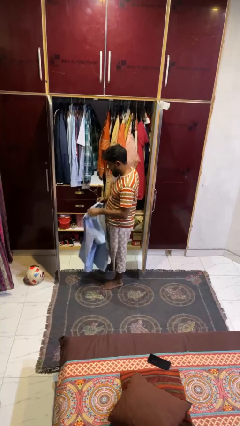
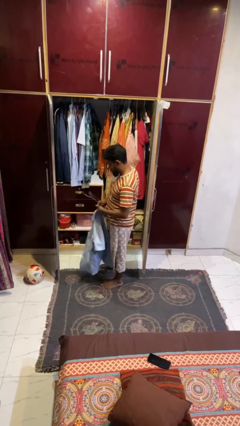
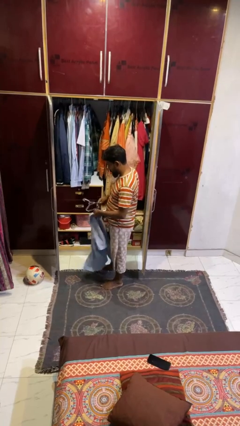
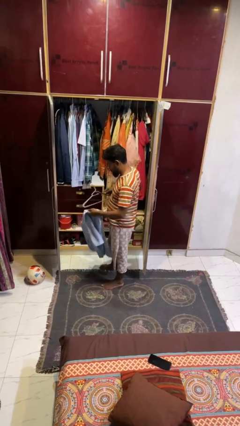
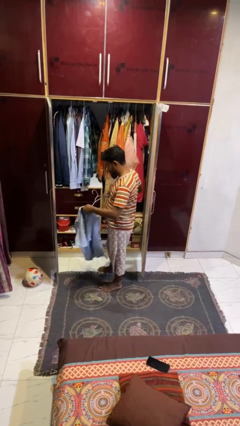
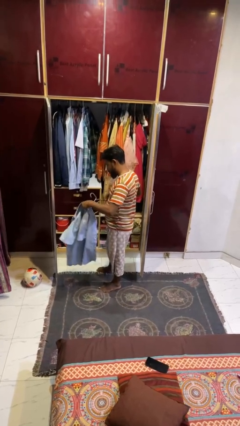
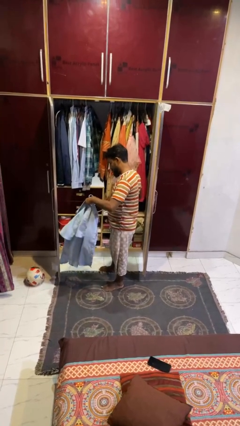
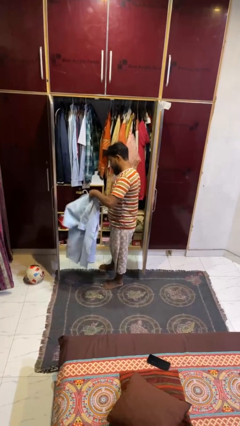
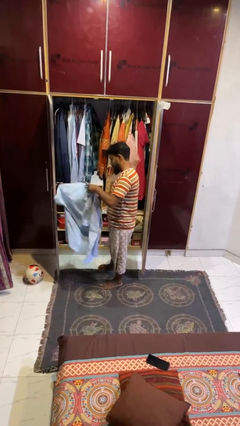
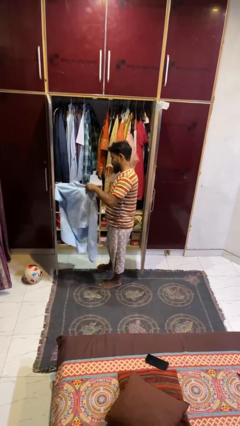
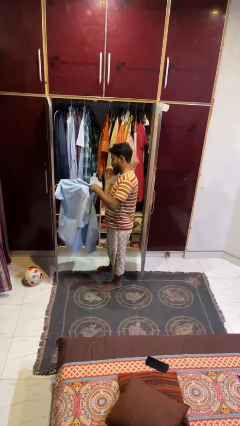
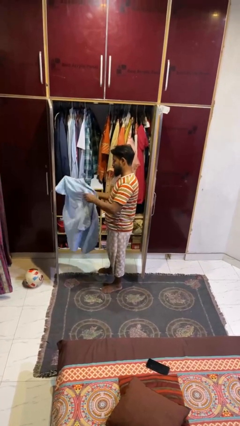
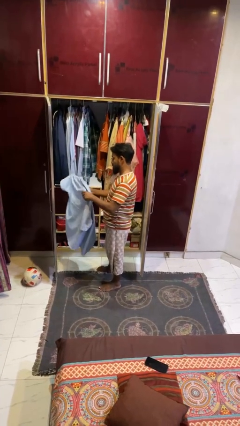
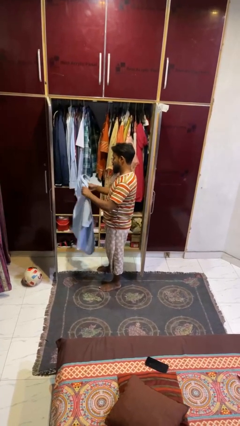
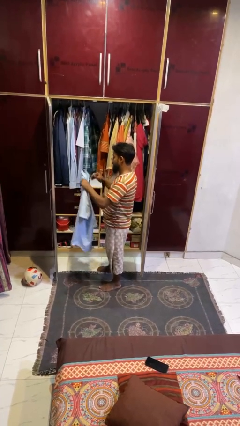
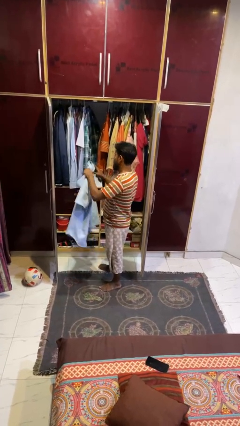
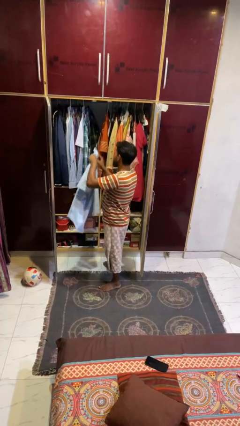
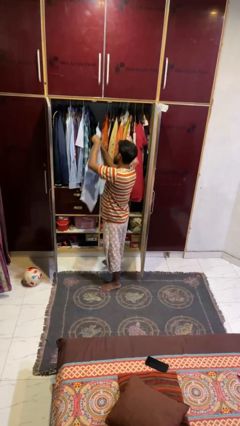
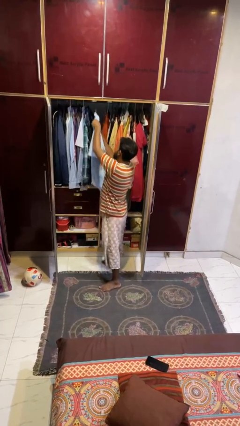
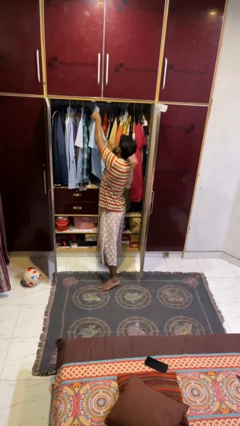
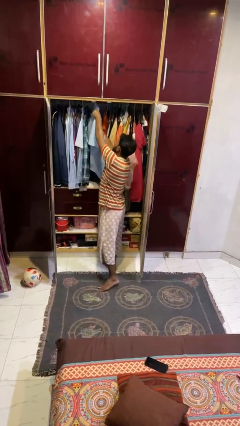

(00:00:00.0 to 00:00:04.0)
person puts clothes into closet

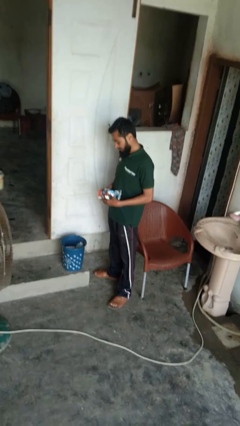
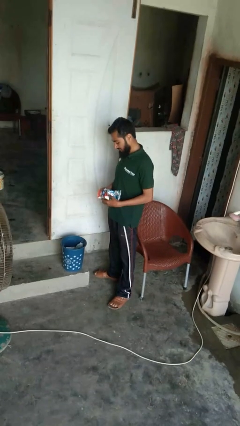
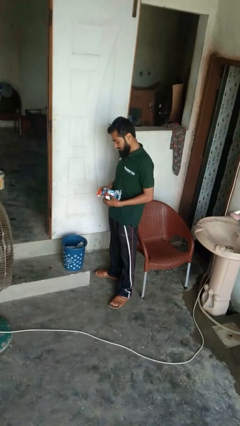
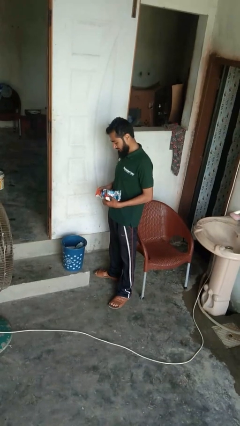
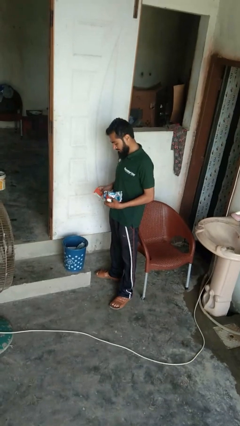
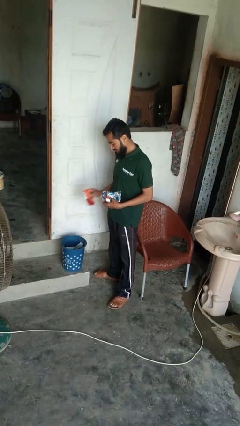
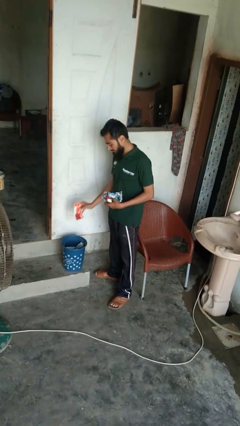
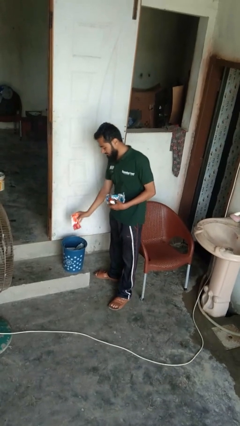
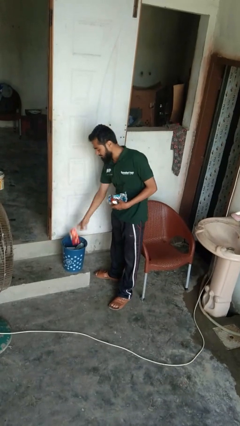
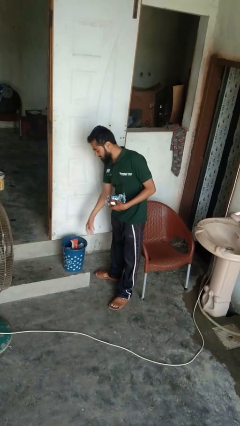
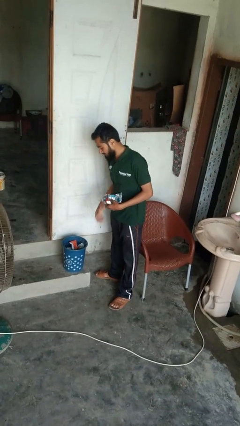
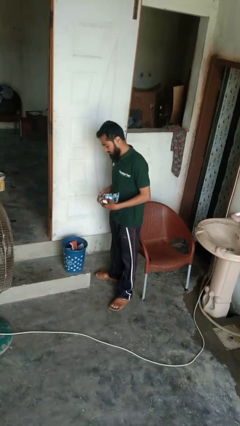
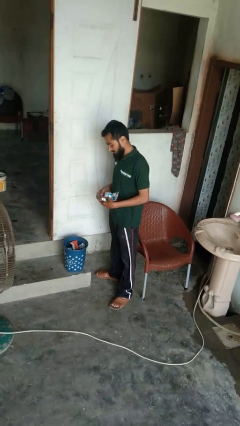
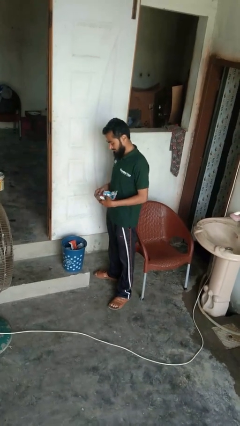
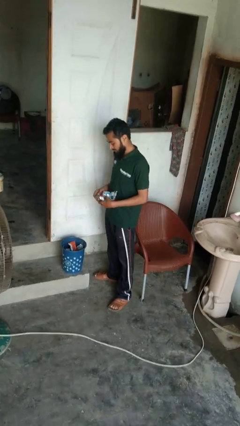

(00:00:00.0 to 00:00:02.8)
person discards trash

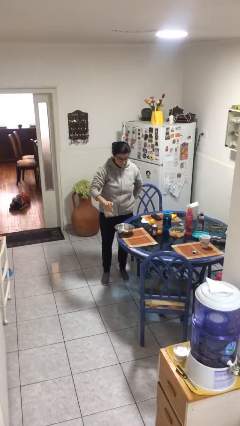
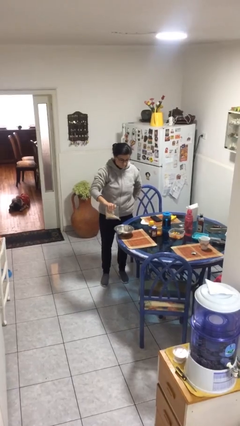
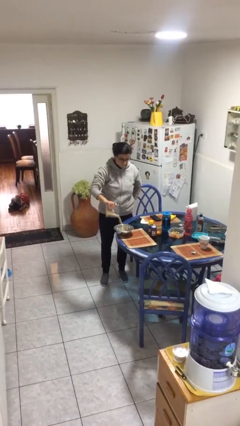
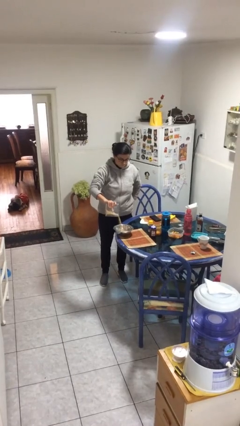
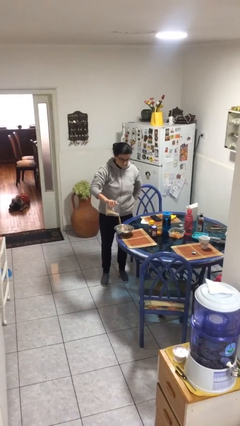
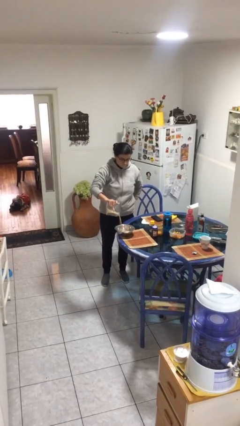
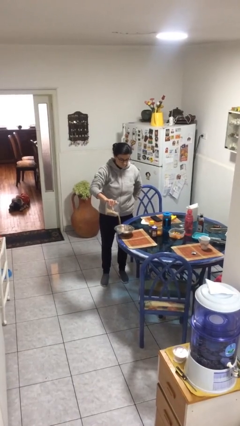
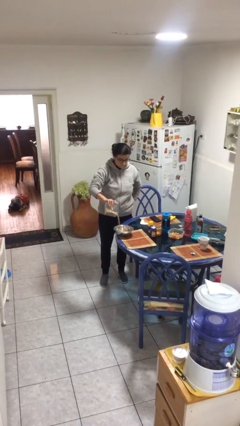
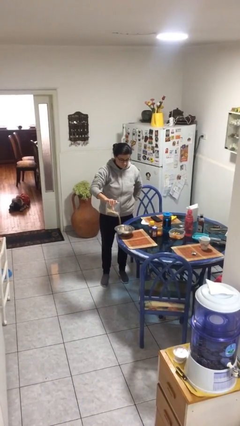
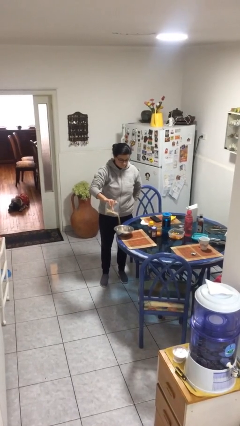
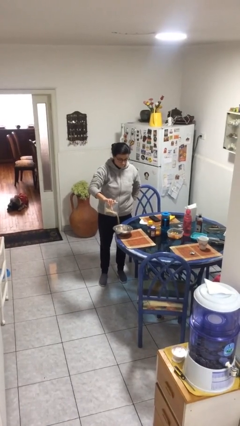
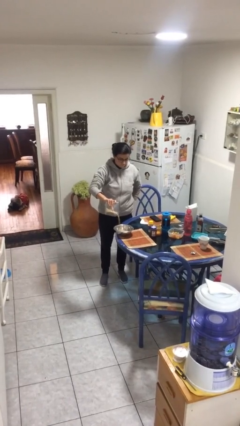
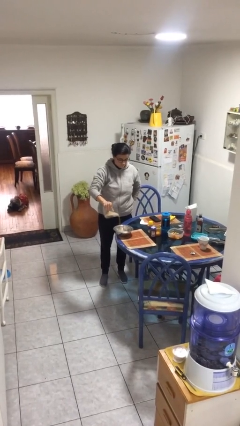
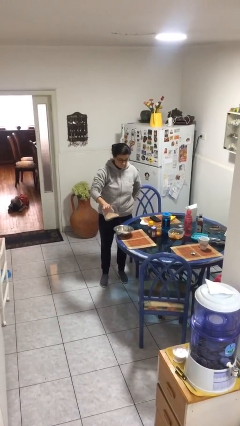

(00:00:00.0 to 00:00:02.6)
person pours into bowl

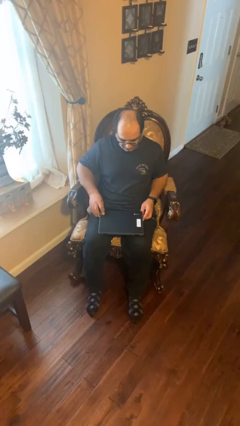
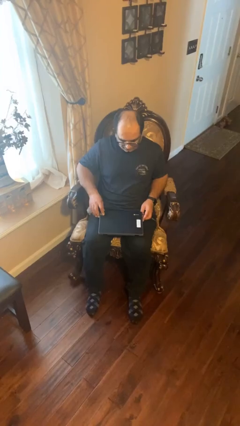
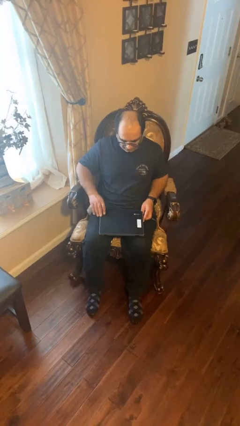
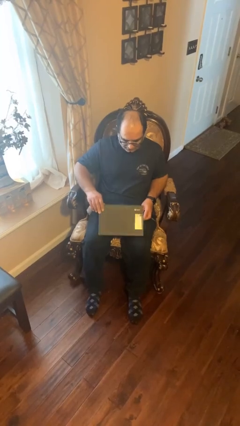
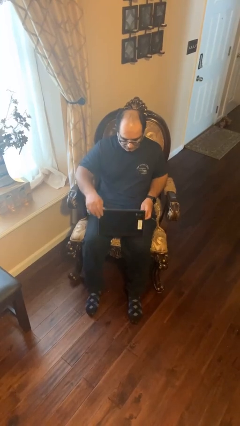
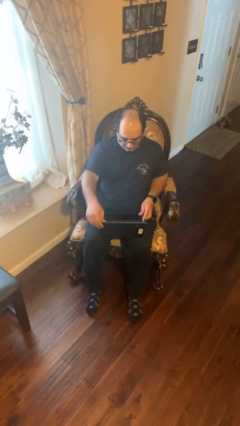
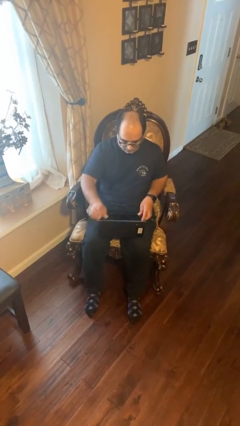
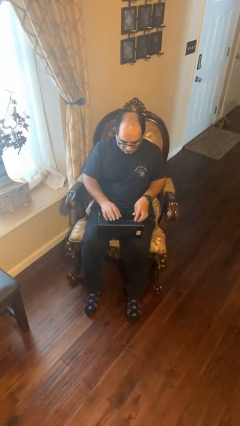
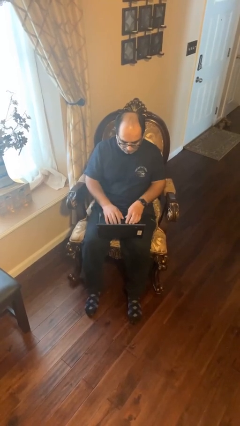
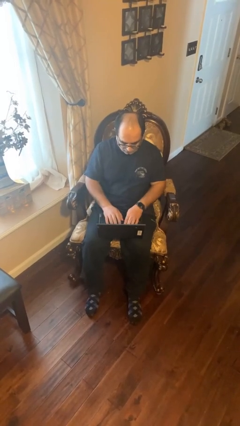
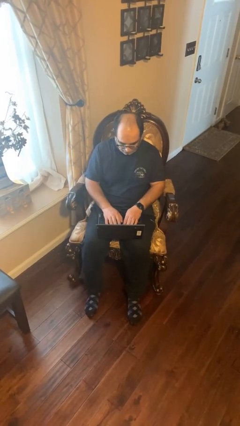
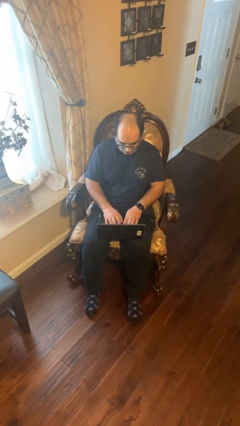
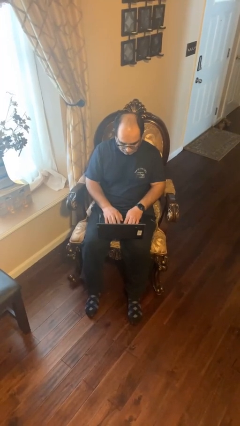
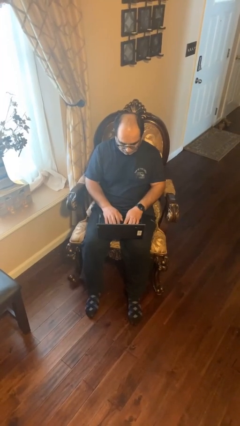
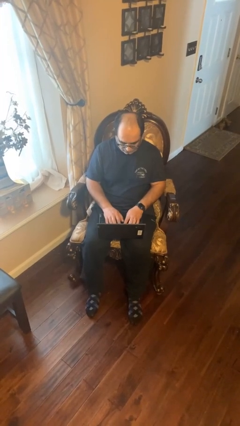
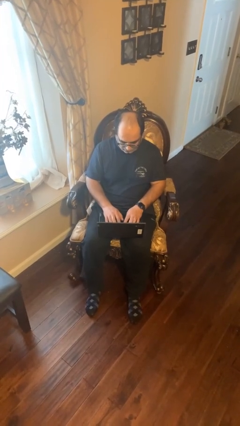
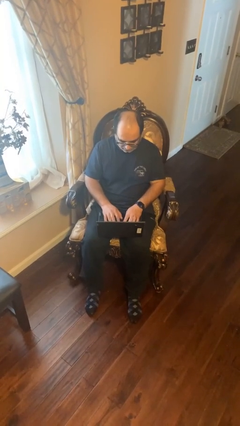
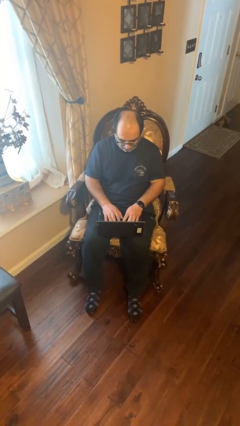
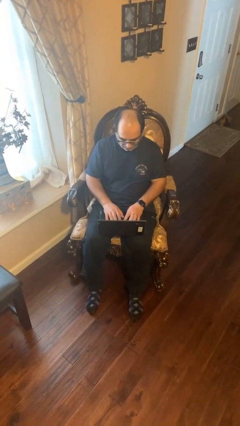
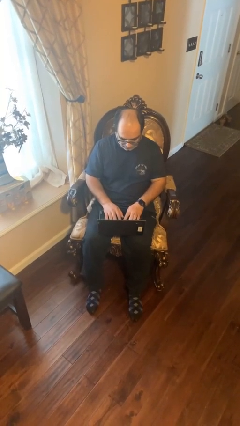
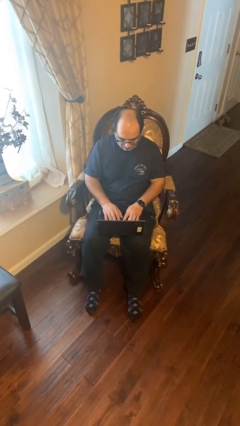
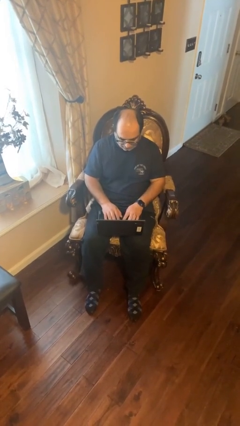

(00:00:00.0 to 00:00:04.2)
person interacts with laptop

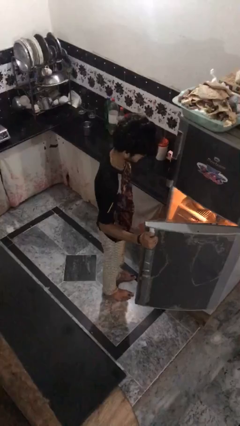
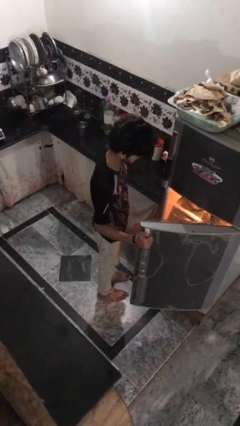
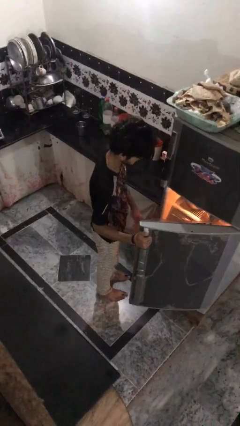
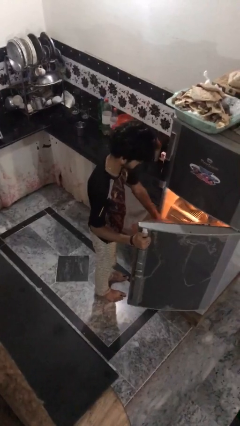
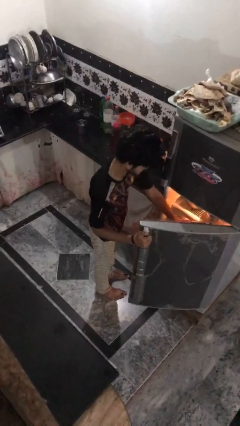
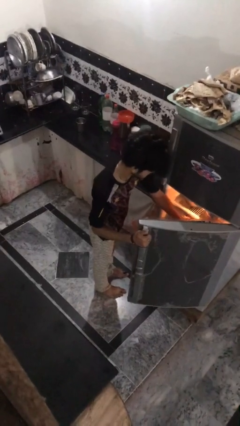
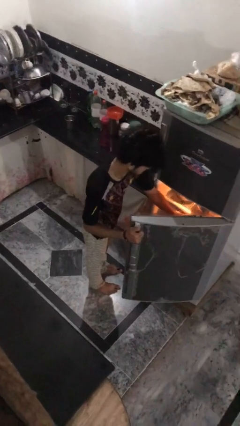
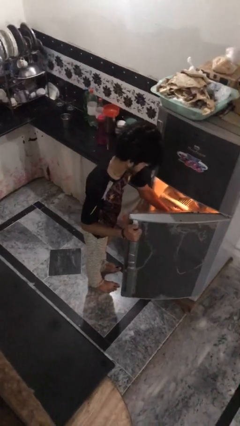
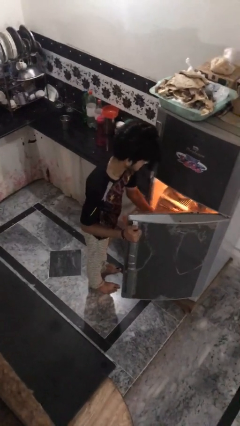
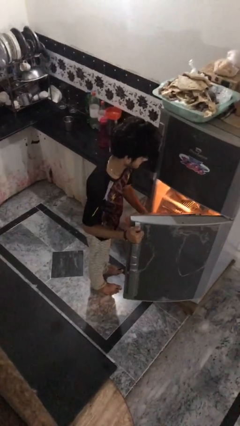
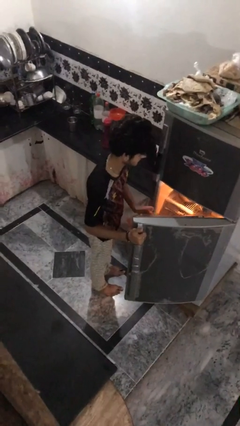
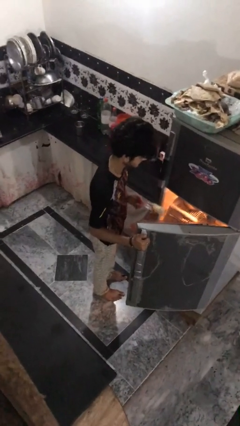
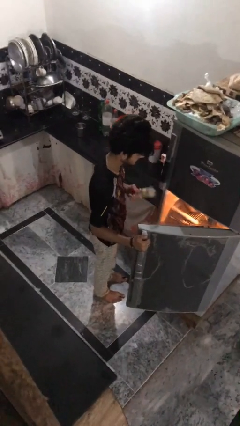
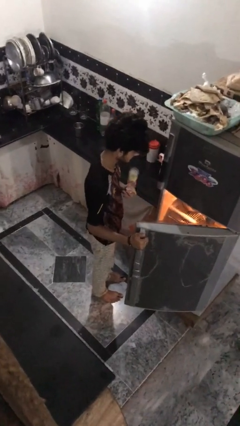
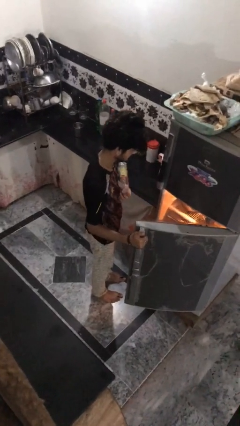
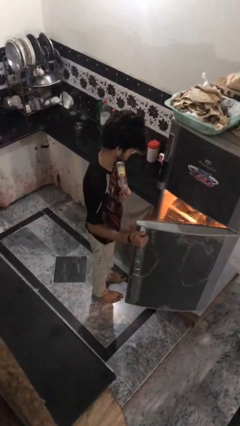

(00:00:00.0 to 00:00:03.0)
person takes object from refrigerator

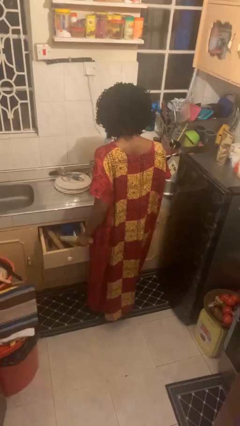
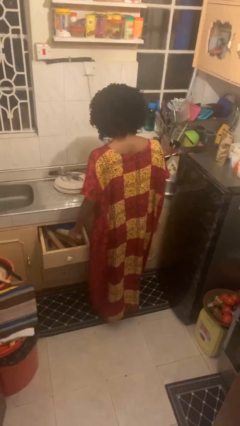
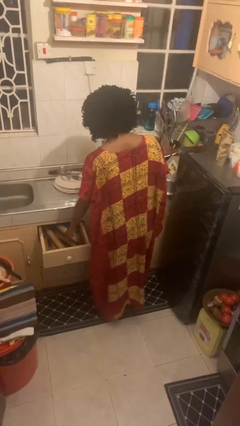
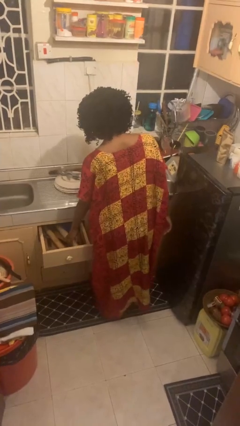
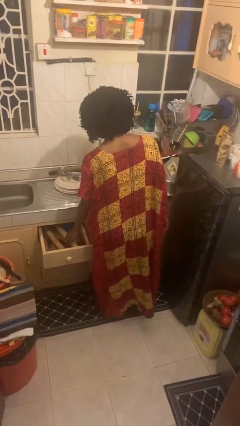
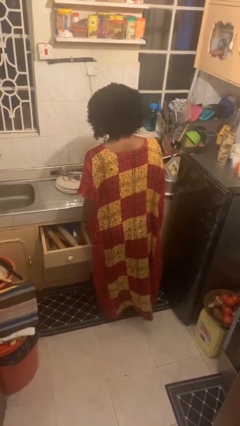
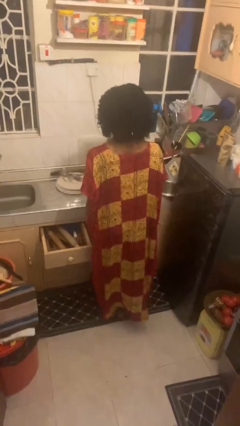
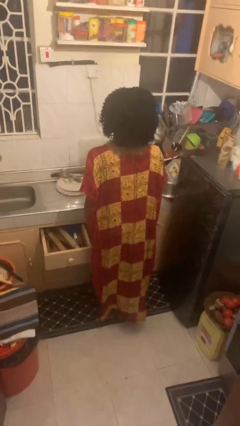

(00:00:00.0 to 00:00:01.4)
person puts object into kitchen drawer
